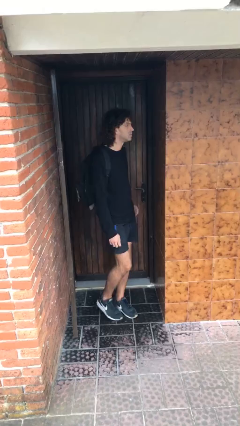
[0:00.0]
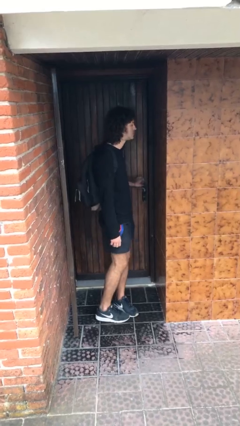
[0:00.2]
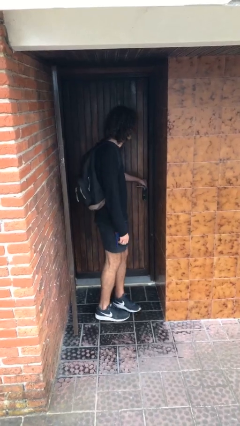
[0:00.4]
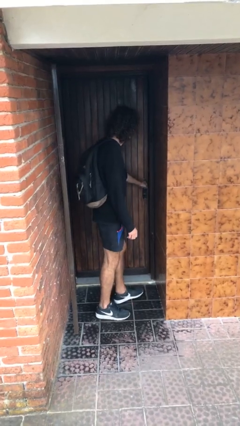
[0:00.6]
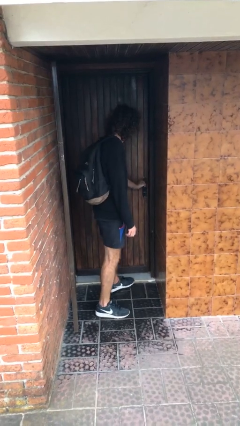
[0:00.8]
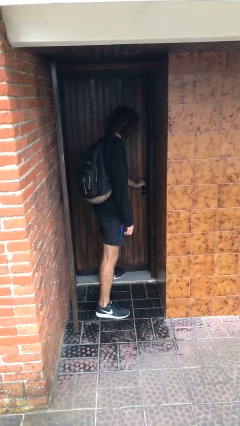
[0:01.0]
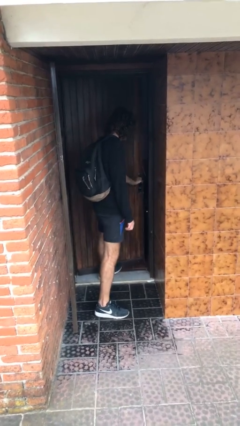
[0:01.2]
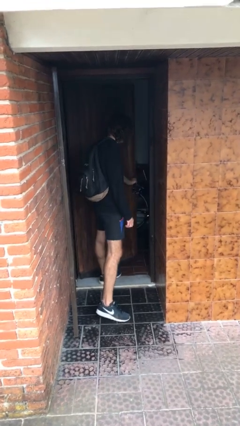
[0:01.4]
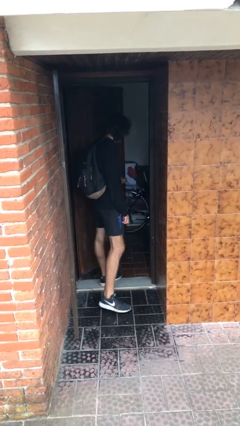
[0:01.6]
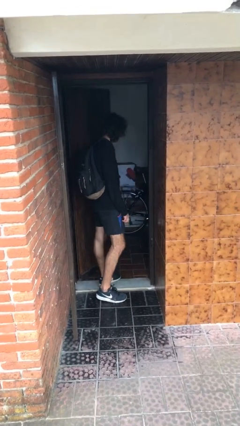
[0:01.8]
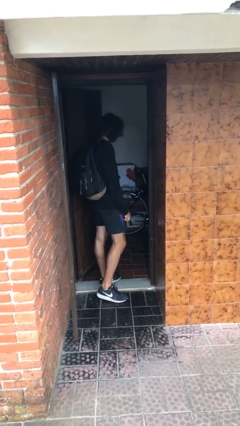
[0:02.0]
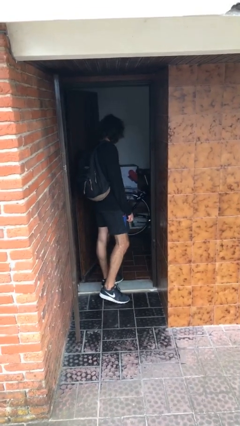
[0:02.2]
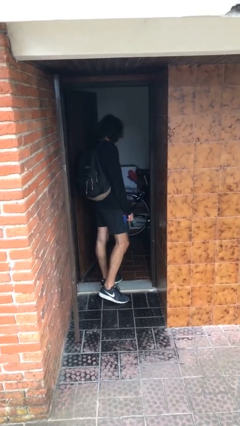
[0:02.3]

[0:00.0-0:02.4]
person opens facility door

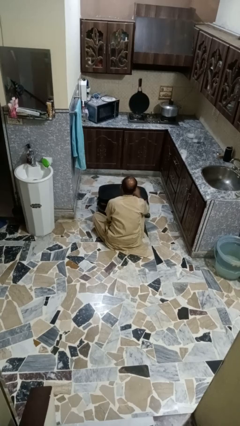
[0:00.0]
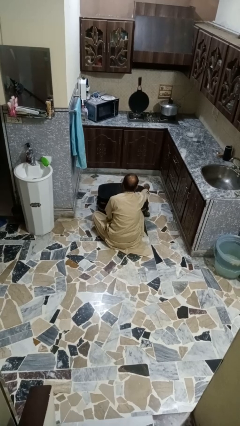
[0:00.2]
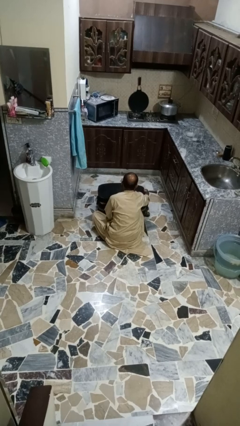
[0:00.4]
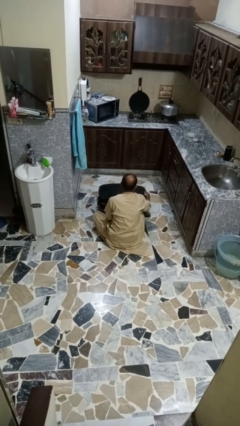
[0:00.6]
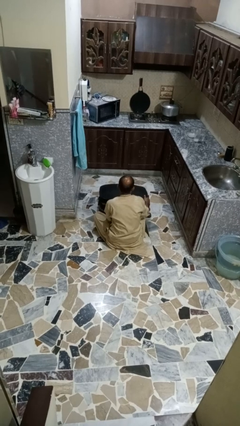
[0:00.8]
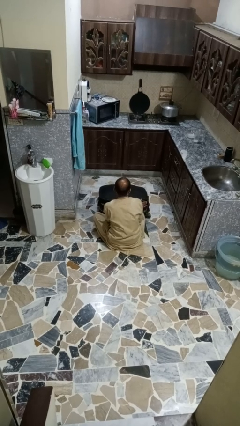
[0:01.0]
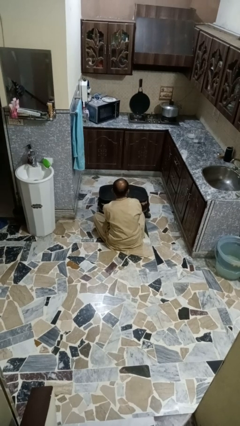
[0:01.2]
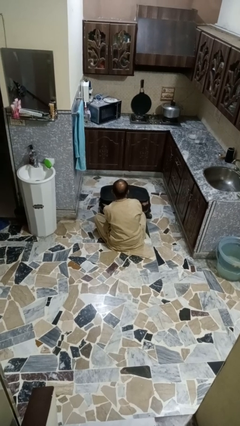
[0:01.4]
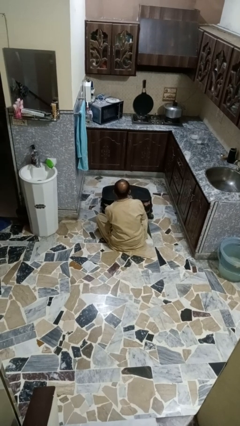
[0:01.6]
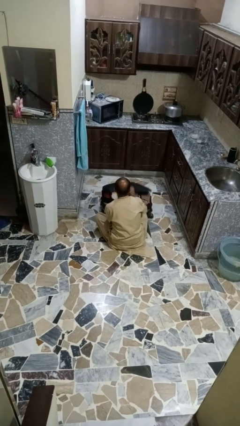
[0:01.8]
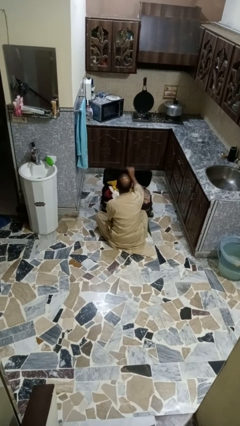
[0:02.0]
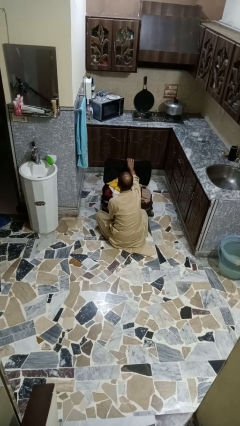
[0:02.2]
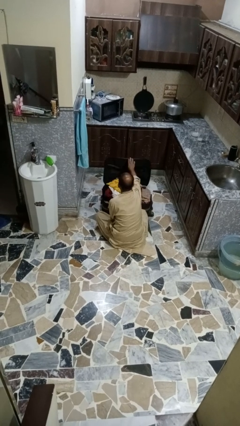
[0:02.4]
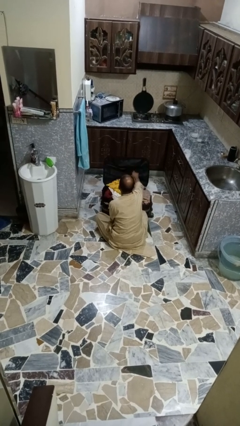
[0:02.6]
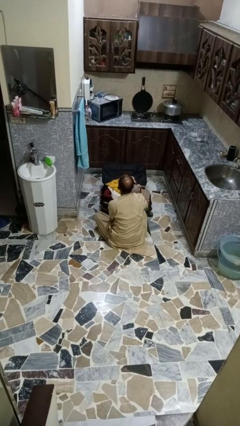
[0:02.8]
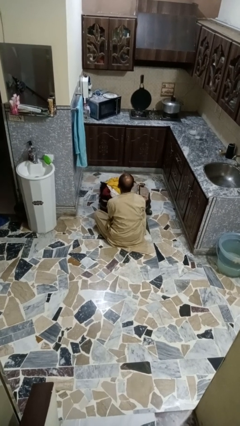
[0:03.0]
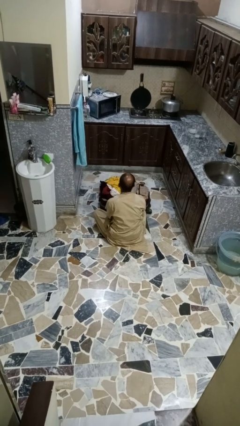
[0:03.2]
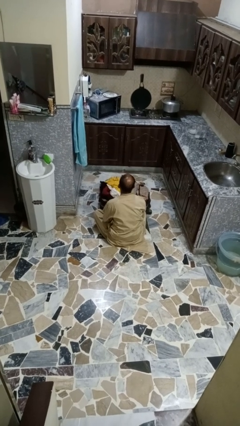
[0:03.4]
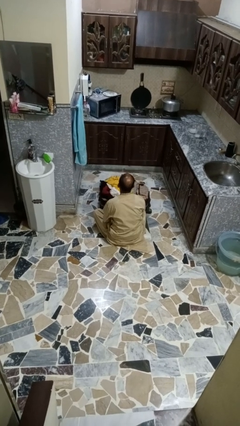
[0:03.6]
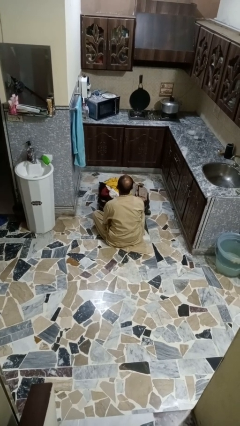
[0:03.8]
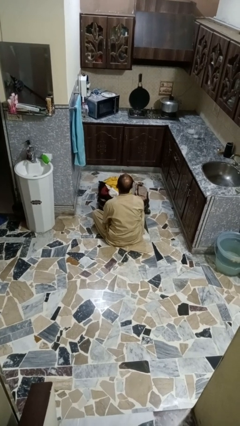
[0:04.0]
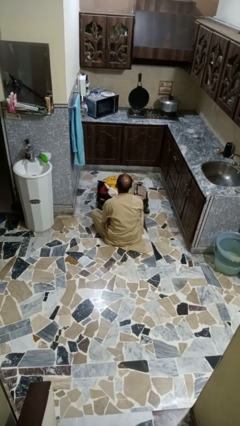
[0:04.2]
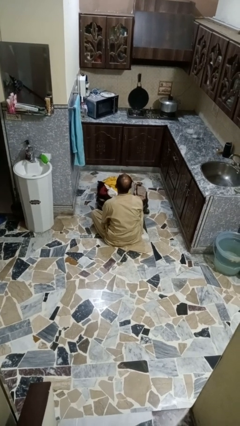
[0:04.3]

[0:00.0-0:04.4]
person opens suitcase

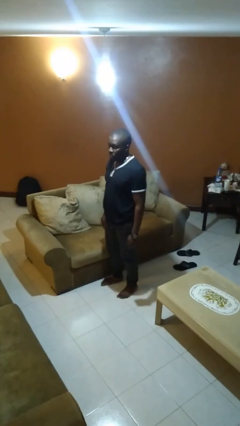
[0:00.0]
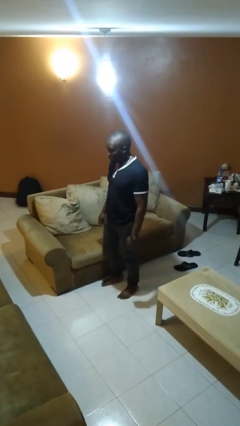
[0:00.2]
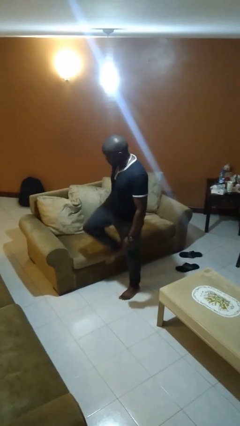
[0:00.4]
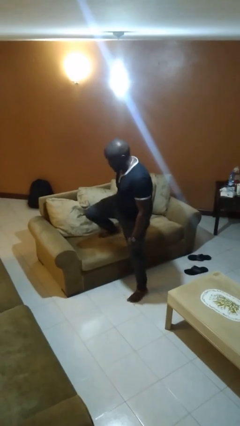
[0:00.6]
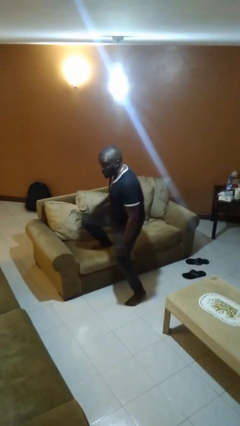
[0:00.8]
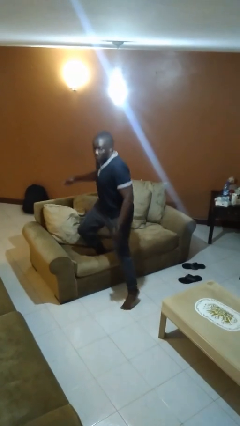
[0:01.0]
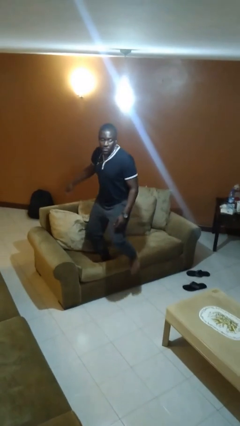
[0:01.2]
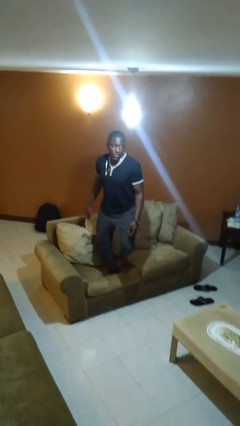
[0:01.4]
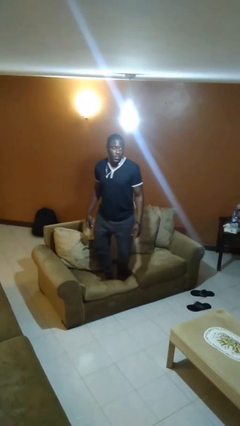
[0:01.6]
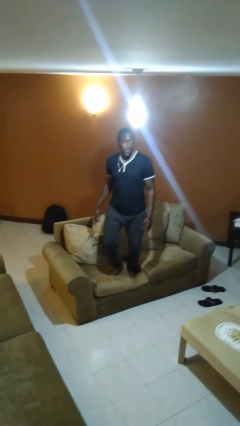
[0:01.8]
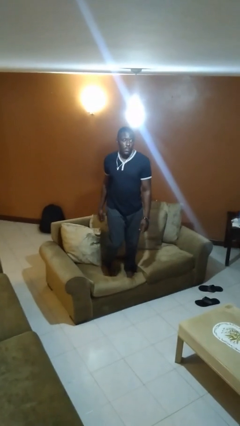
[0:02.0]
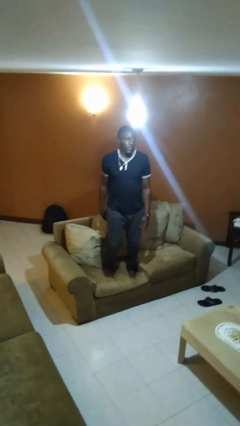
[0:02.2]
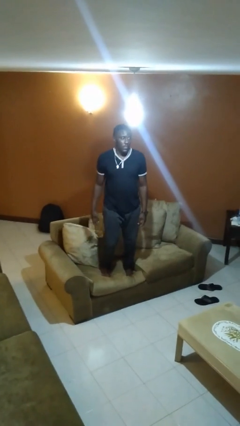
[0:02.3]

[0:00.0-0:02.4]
person climbs on couch

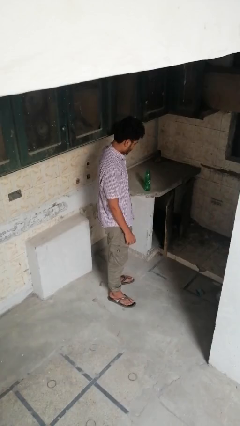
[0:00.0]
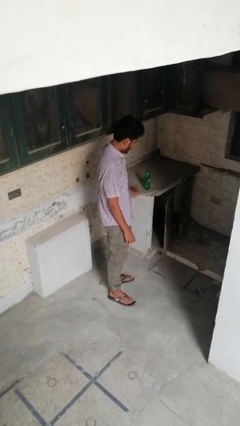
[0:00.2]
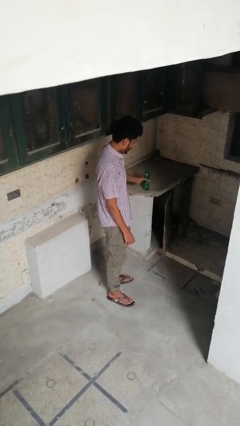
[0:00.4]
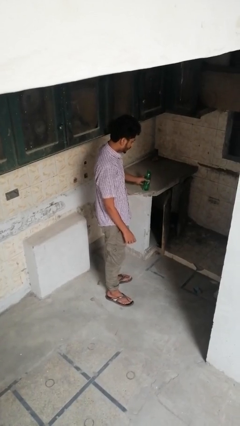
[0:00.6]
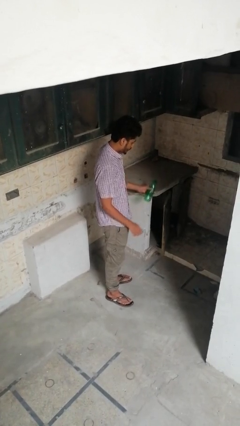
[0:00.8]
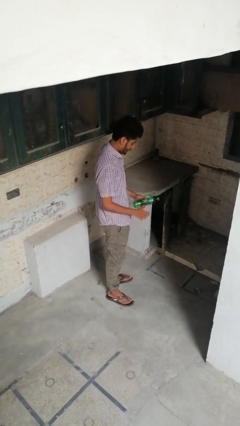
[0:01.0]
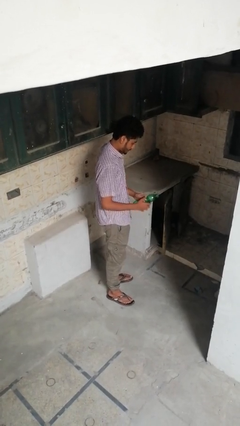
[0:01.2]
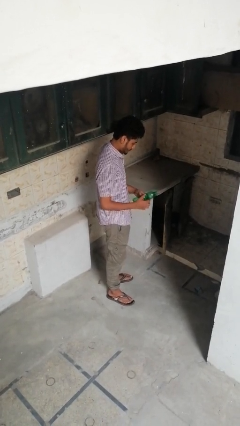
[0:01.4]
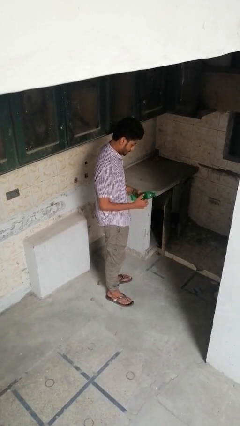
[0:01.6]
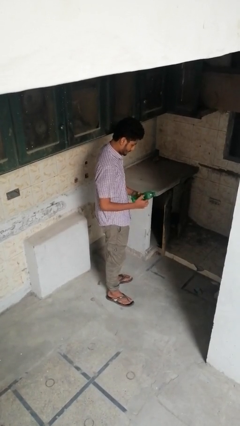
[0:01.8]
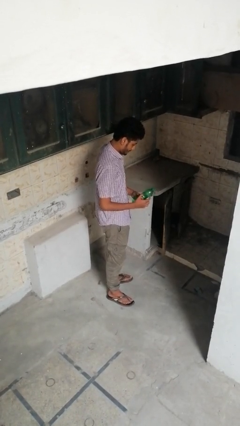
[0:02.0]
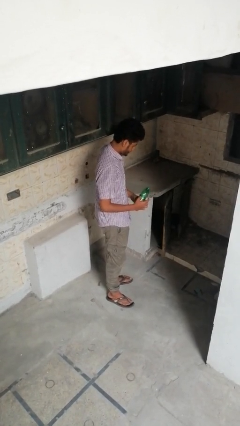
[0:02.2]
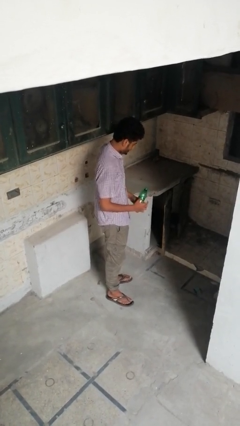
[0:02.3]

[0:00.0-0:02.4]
person picks up object from countertop

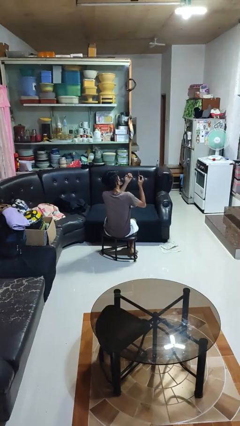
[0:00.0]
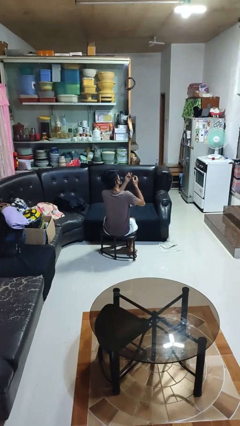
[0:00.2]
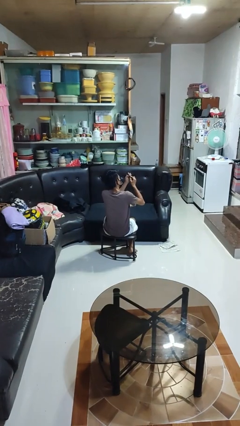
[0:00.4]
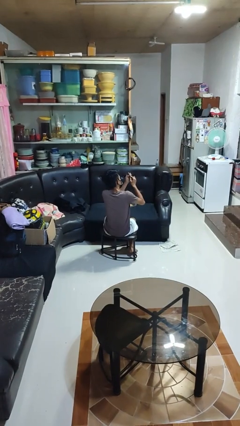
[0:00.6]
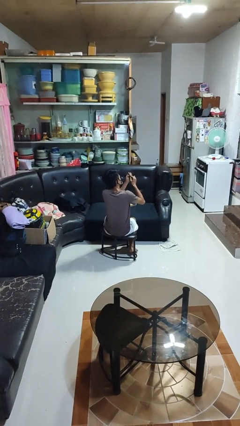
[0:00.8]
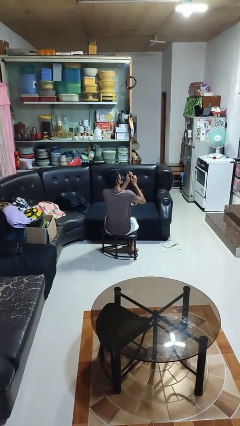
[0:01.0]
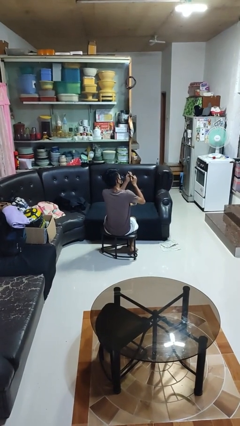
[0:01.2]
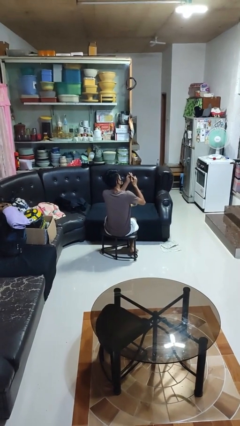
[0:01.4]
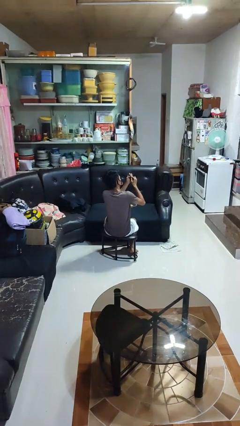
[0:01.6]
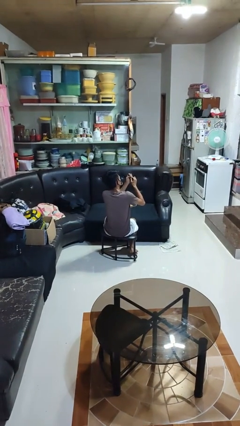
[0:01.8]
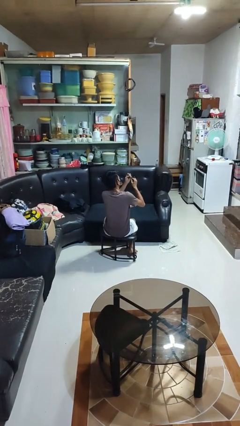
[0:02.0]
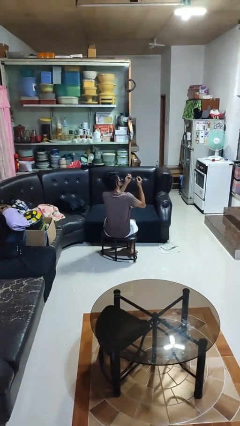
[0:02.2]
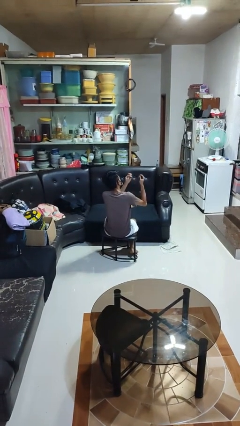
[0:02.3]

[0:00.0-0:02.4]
person files fingernails

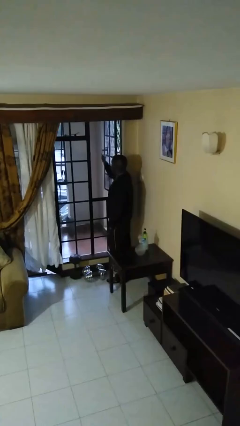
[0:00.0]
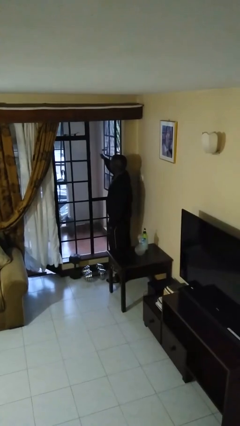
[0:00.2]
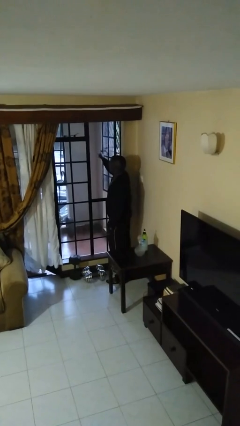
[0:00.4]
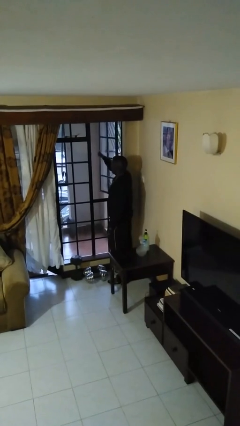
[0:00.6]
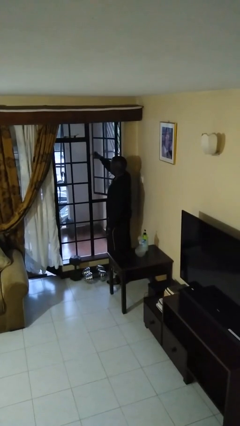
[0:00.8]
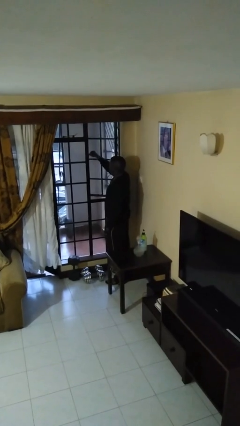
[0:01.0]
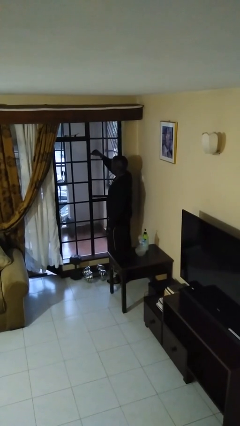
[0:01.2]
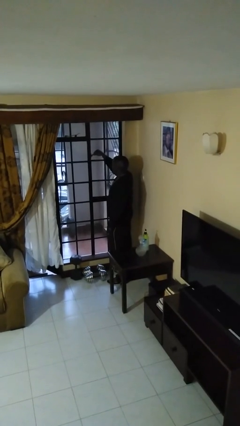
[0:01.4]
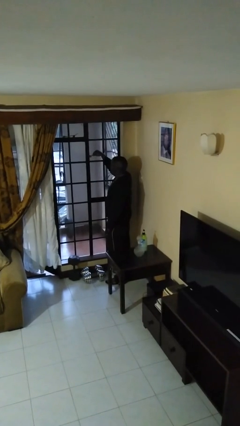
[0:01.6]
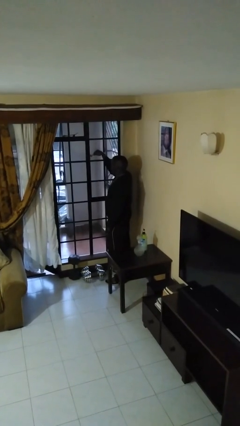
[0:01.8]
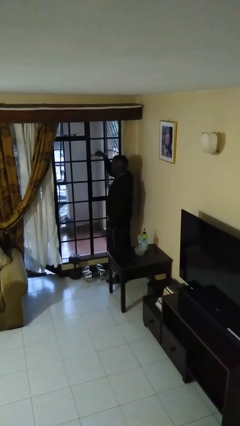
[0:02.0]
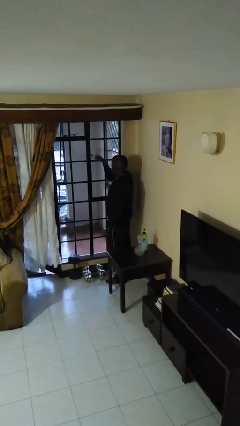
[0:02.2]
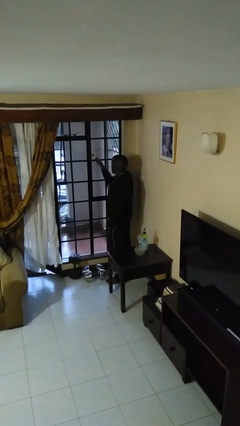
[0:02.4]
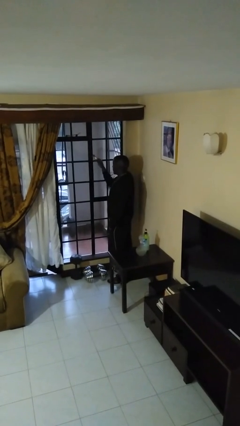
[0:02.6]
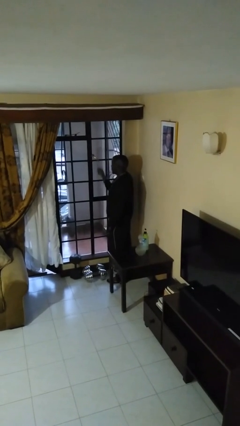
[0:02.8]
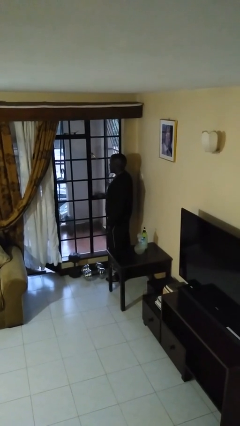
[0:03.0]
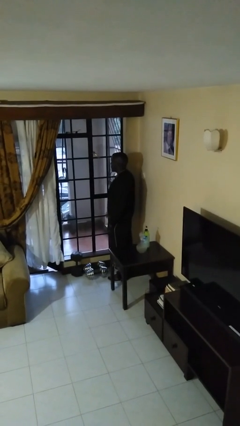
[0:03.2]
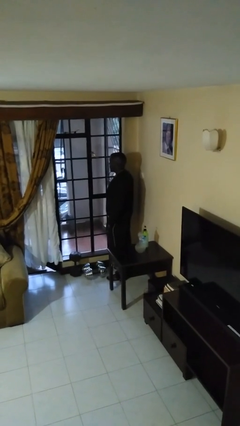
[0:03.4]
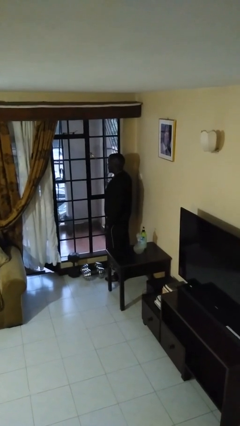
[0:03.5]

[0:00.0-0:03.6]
person closes home window
